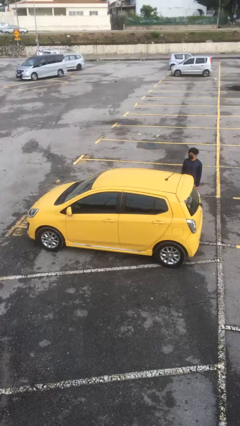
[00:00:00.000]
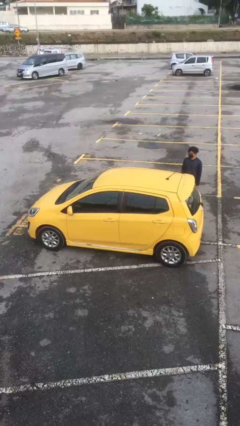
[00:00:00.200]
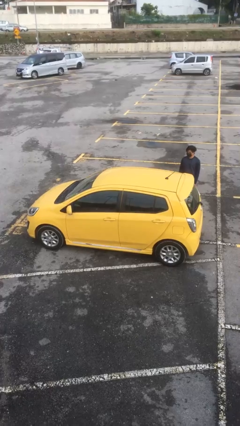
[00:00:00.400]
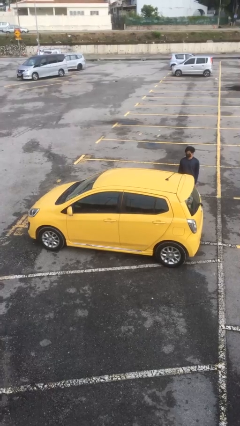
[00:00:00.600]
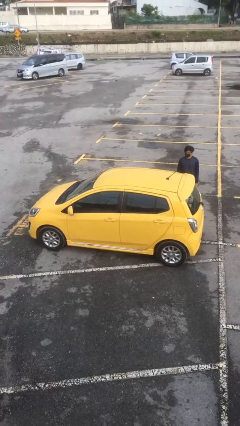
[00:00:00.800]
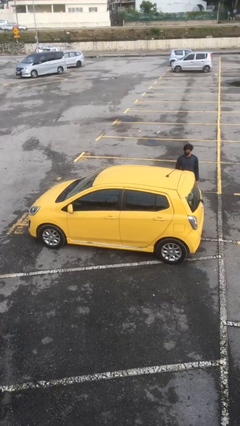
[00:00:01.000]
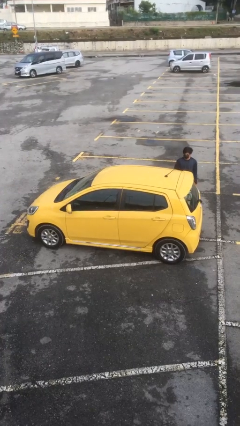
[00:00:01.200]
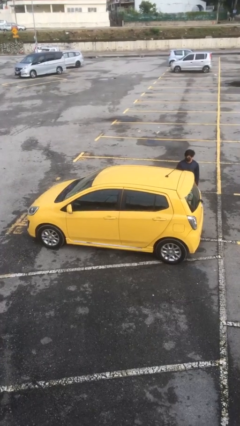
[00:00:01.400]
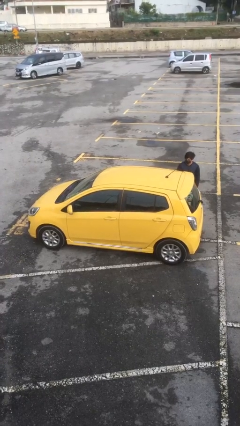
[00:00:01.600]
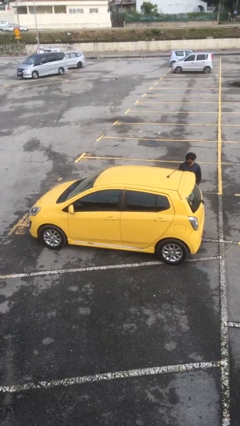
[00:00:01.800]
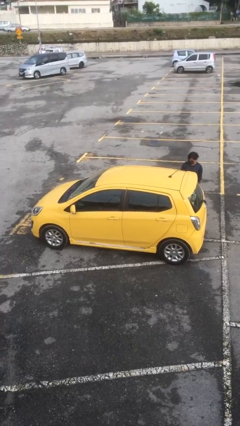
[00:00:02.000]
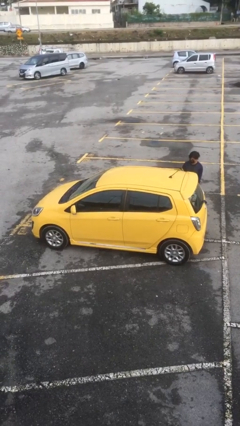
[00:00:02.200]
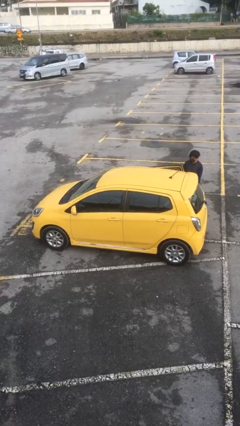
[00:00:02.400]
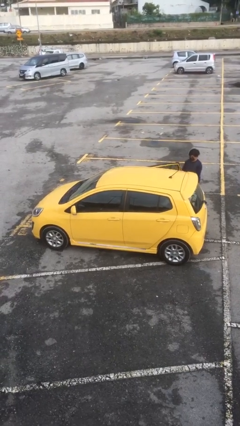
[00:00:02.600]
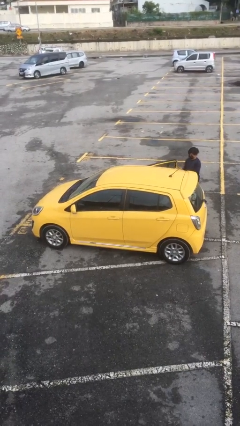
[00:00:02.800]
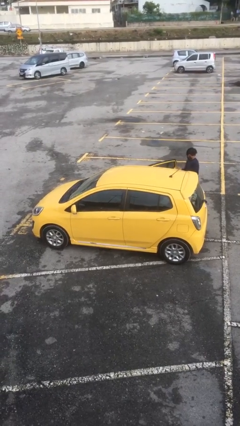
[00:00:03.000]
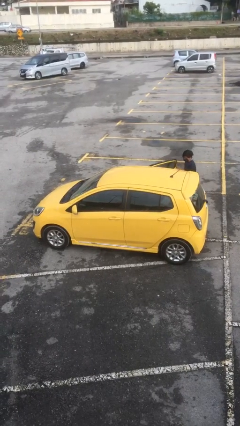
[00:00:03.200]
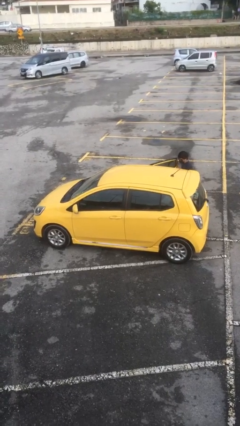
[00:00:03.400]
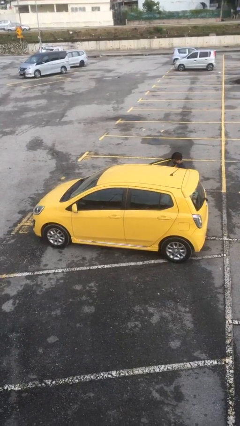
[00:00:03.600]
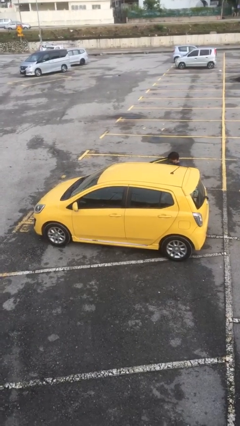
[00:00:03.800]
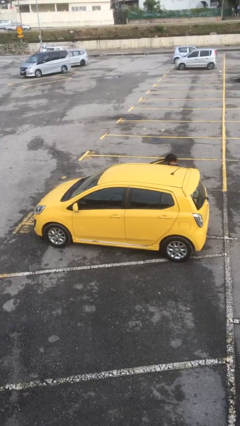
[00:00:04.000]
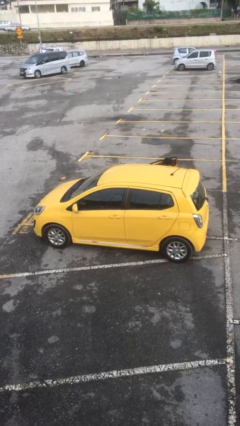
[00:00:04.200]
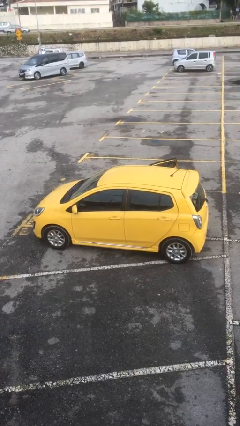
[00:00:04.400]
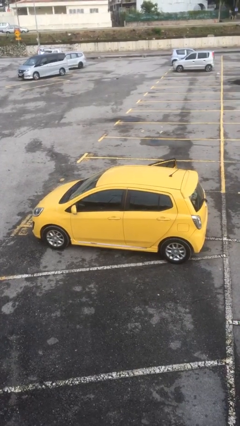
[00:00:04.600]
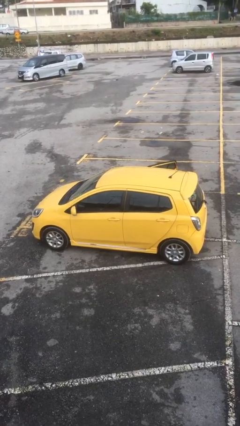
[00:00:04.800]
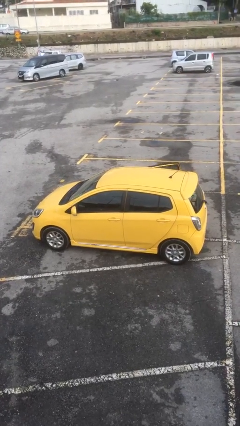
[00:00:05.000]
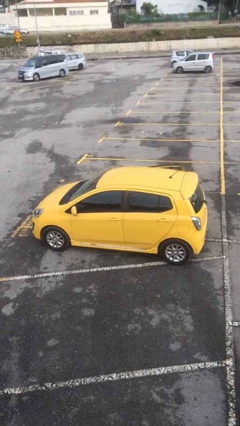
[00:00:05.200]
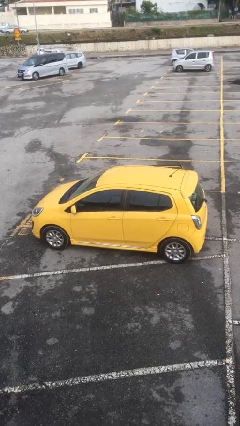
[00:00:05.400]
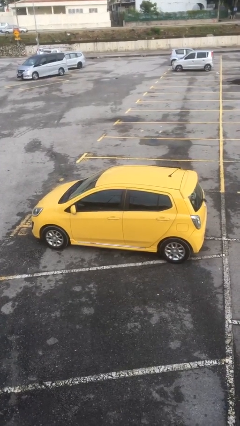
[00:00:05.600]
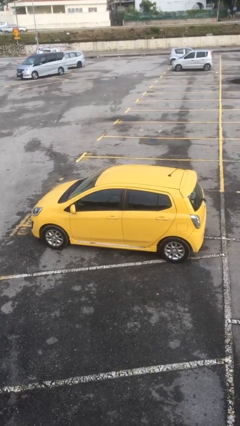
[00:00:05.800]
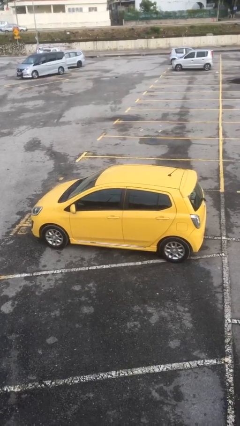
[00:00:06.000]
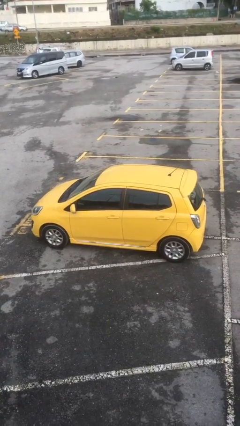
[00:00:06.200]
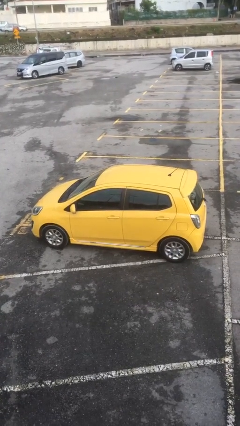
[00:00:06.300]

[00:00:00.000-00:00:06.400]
car picks up person

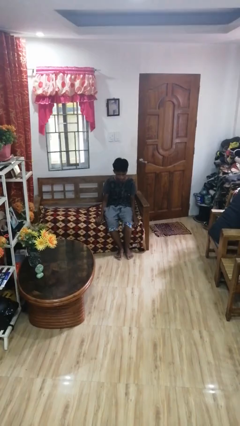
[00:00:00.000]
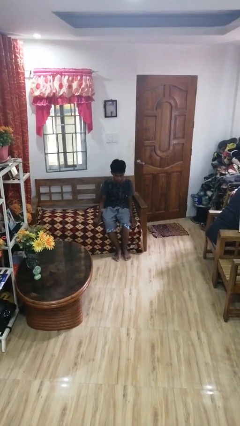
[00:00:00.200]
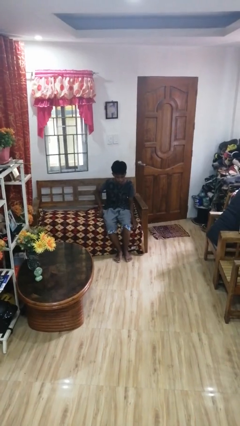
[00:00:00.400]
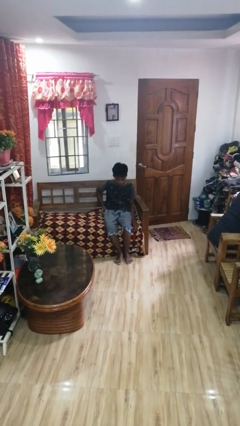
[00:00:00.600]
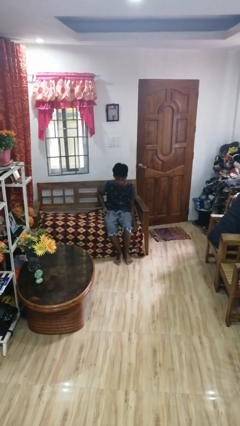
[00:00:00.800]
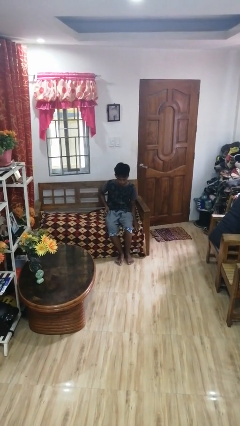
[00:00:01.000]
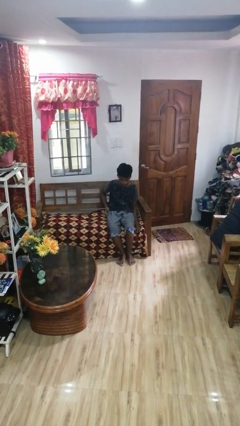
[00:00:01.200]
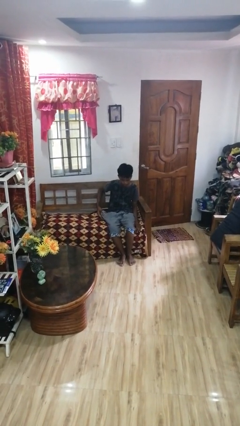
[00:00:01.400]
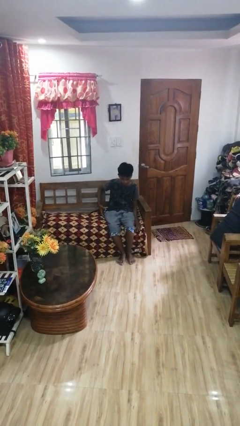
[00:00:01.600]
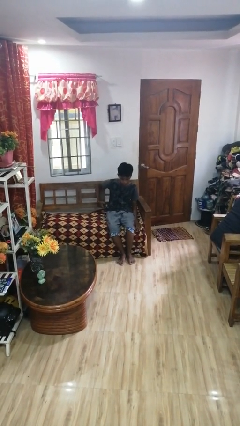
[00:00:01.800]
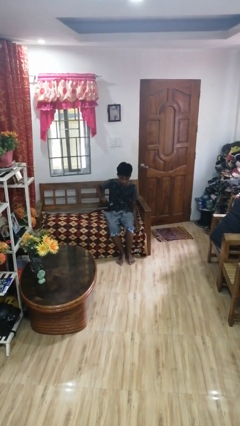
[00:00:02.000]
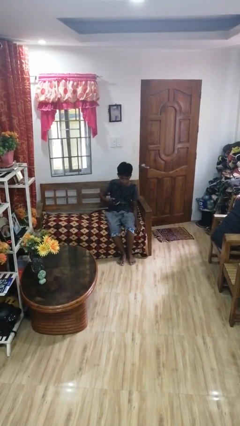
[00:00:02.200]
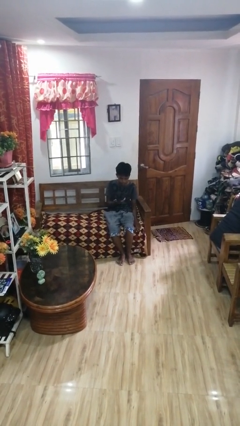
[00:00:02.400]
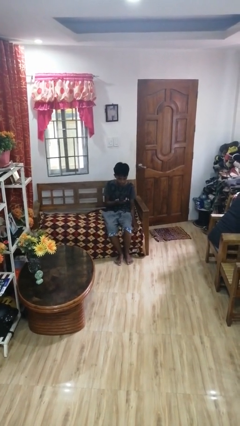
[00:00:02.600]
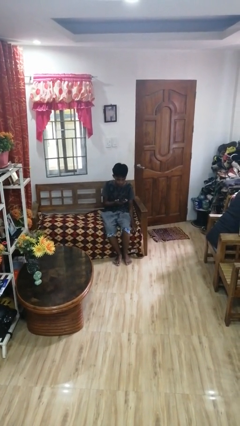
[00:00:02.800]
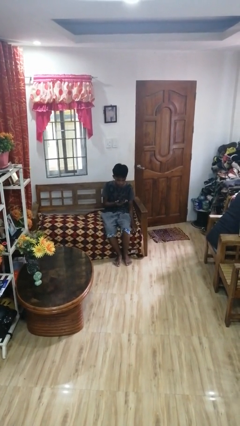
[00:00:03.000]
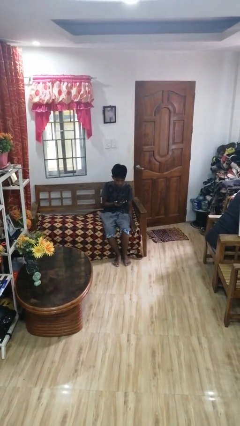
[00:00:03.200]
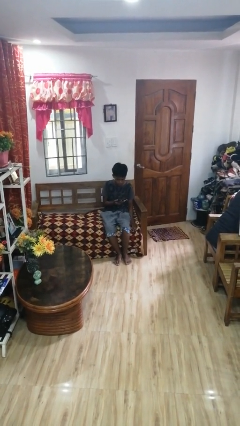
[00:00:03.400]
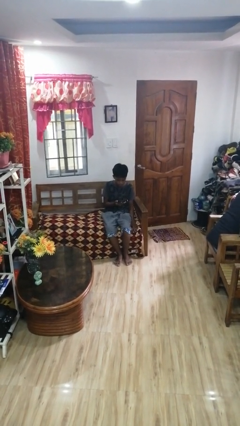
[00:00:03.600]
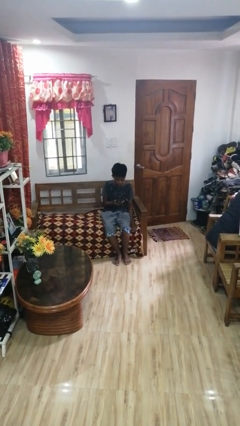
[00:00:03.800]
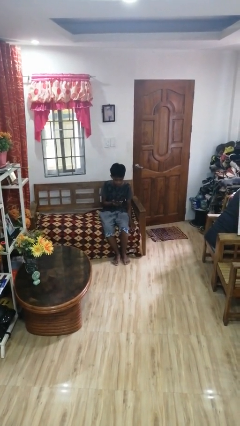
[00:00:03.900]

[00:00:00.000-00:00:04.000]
person takes phone from pocket

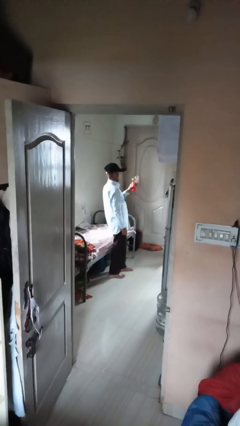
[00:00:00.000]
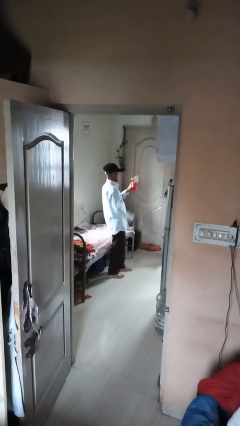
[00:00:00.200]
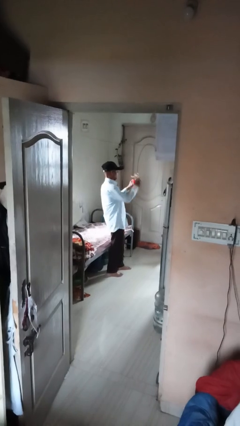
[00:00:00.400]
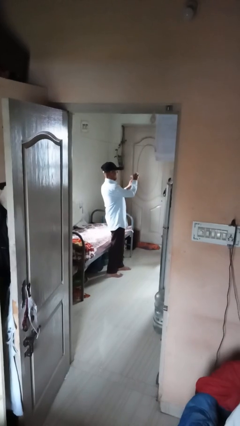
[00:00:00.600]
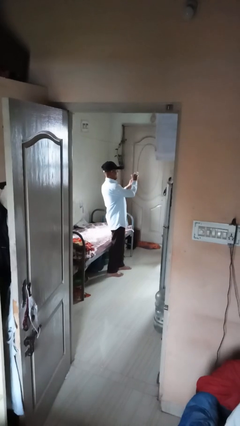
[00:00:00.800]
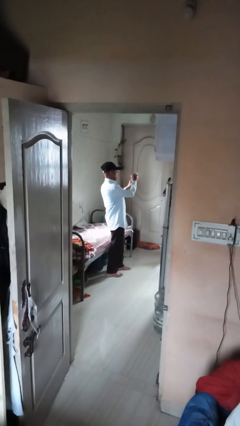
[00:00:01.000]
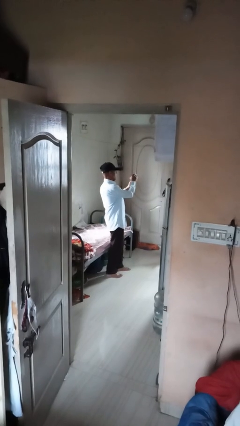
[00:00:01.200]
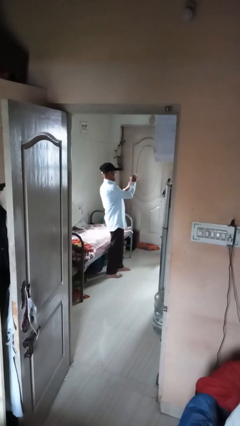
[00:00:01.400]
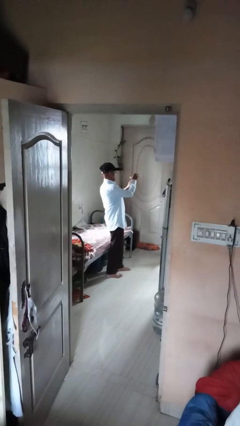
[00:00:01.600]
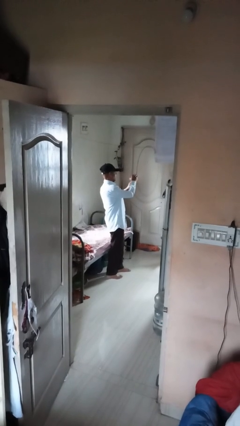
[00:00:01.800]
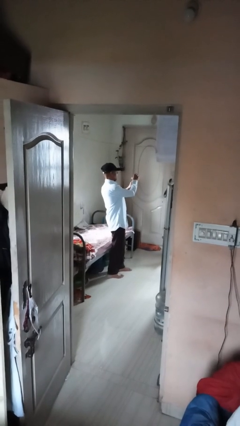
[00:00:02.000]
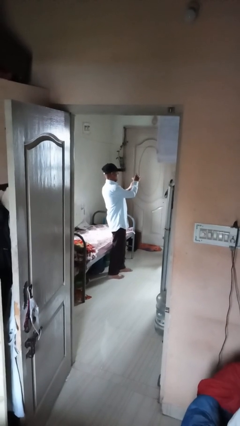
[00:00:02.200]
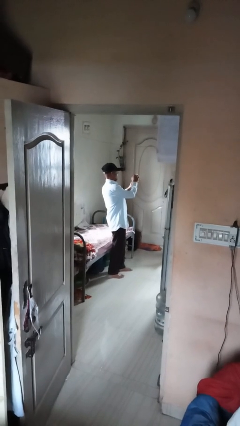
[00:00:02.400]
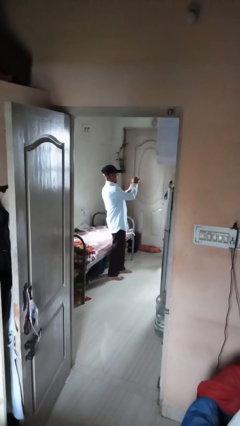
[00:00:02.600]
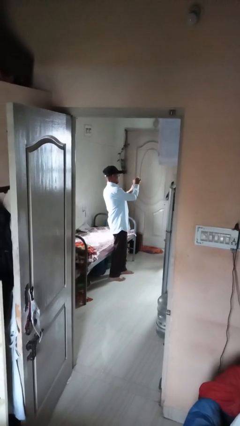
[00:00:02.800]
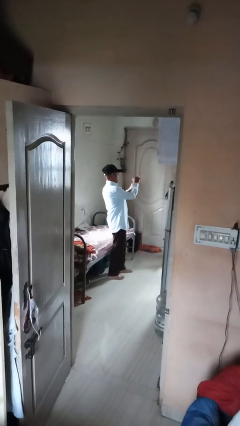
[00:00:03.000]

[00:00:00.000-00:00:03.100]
person arranges flowers in vase

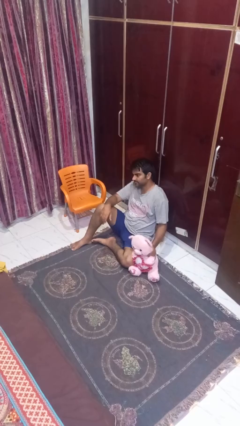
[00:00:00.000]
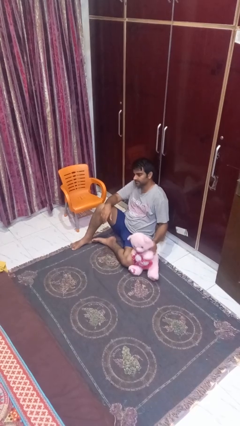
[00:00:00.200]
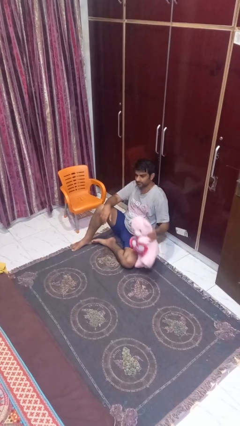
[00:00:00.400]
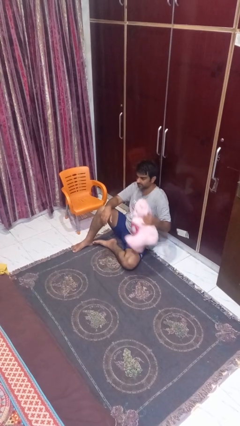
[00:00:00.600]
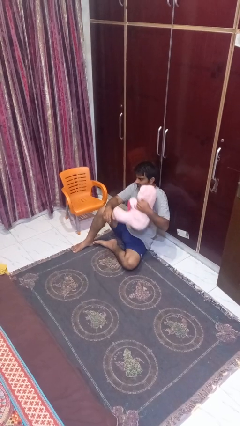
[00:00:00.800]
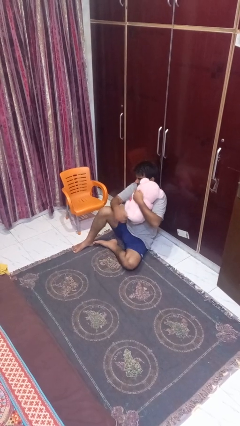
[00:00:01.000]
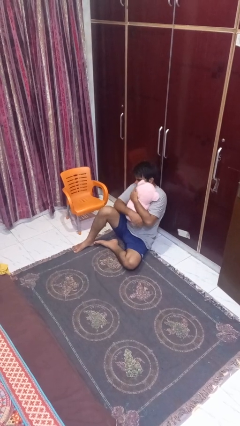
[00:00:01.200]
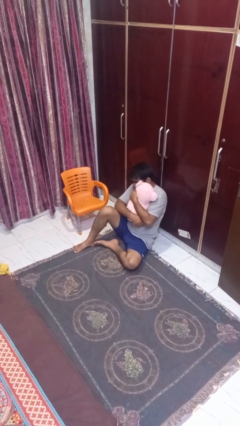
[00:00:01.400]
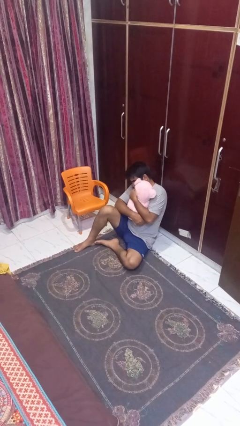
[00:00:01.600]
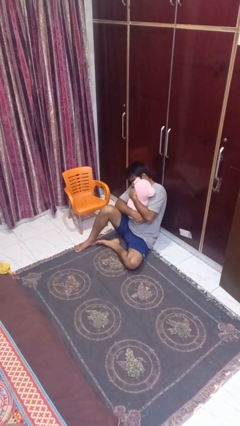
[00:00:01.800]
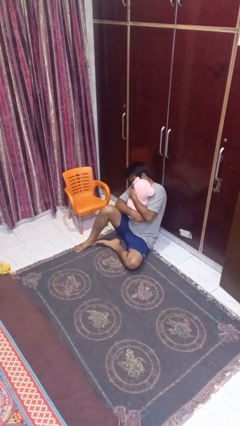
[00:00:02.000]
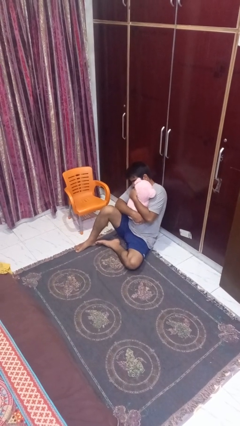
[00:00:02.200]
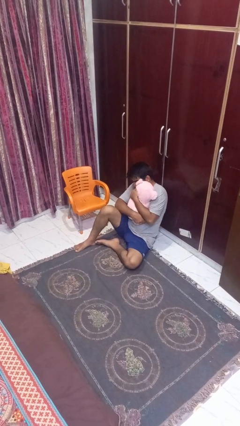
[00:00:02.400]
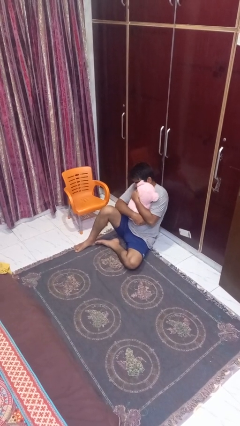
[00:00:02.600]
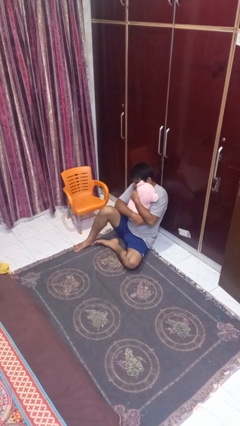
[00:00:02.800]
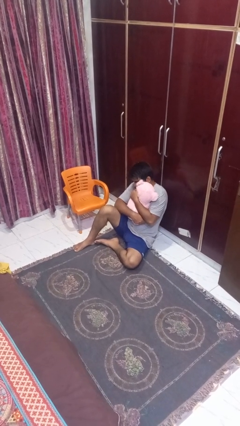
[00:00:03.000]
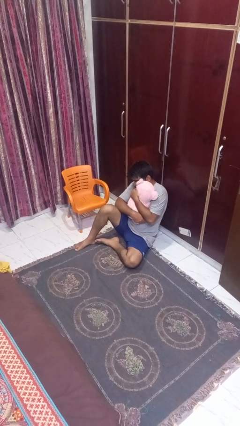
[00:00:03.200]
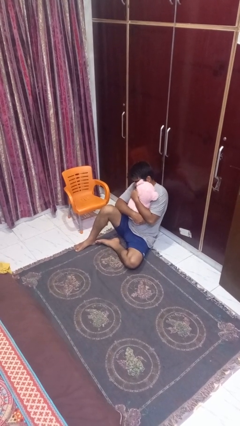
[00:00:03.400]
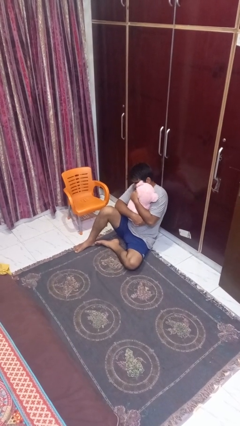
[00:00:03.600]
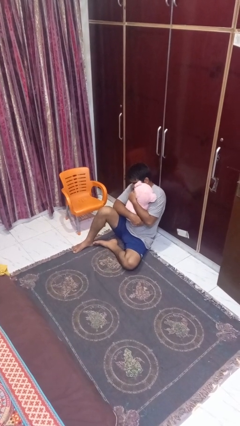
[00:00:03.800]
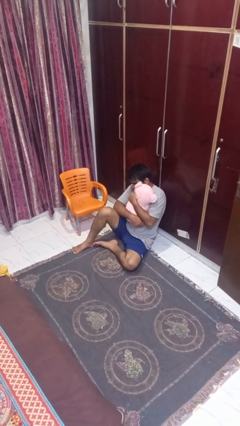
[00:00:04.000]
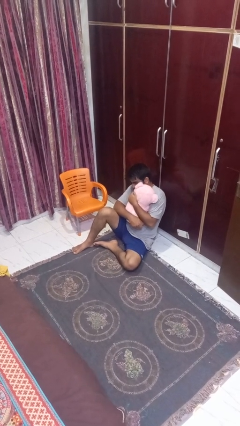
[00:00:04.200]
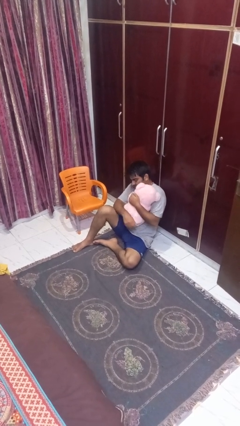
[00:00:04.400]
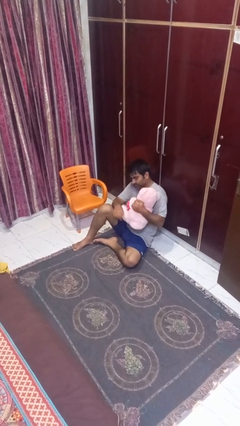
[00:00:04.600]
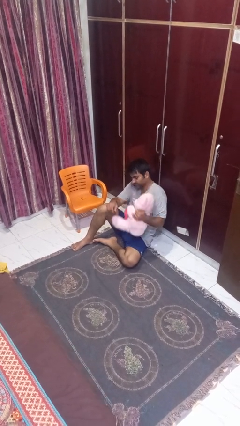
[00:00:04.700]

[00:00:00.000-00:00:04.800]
person hugs stuffed animal
